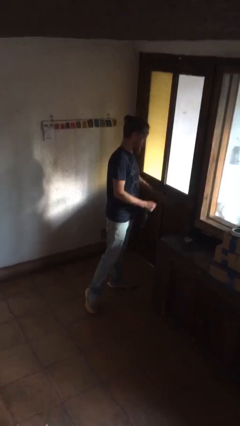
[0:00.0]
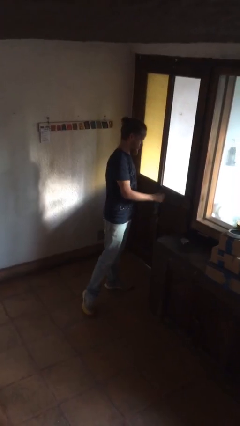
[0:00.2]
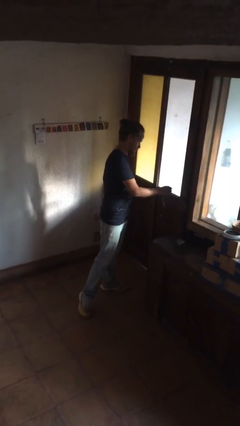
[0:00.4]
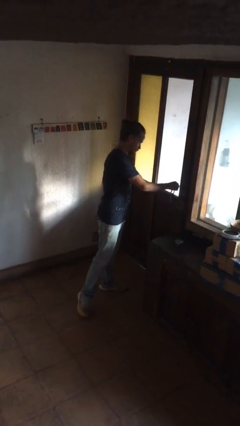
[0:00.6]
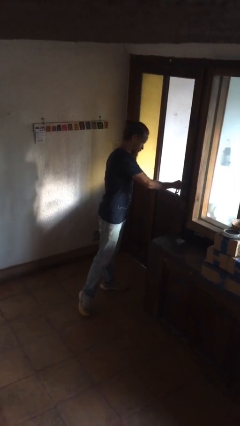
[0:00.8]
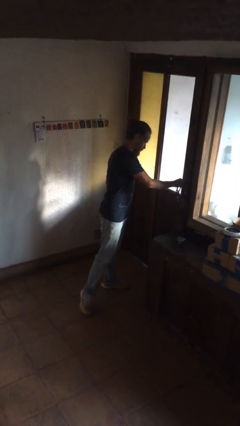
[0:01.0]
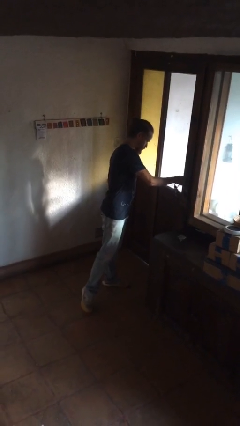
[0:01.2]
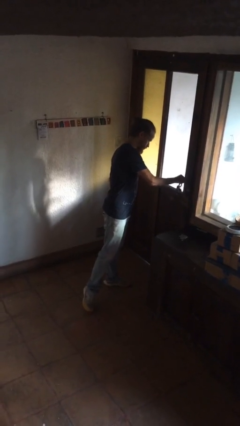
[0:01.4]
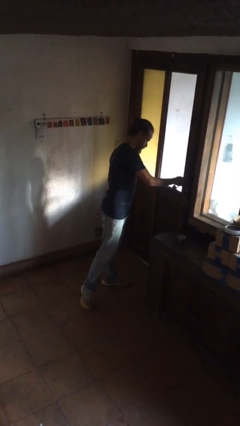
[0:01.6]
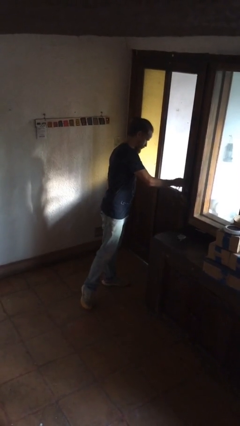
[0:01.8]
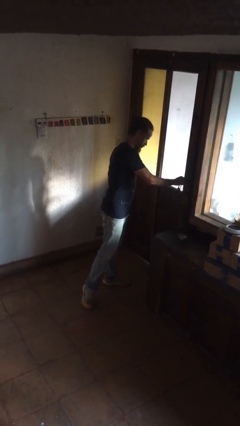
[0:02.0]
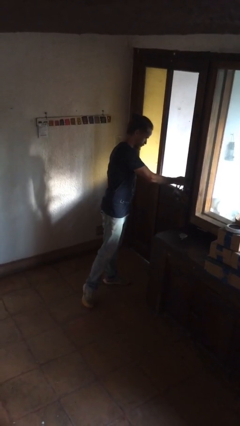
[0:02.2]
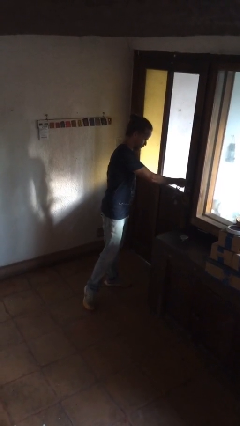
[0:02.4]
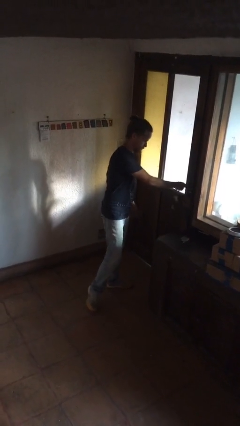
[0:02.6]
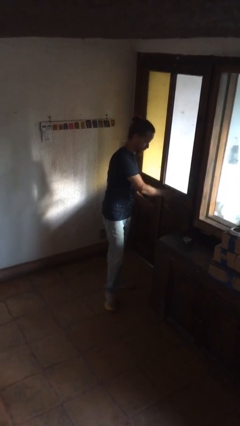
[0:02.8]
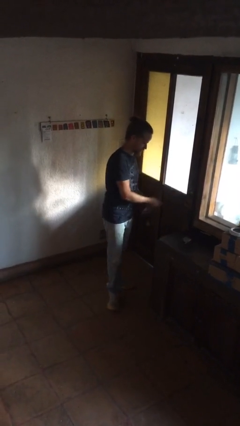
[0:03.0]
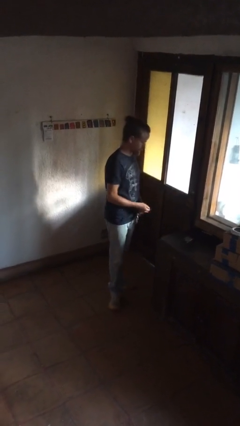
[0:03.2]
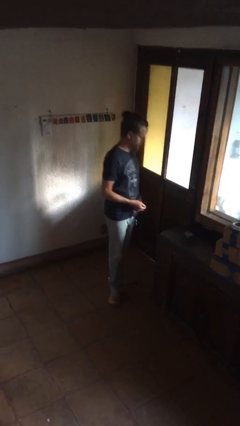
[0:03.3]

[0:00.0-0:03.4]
person locks door with keys

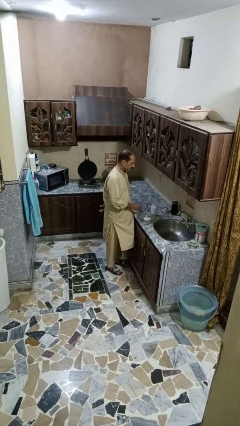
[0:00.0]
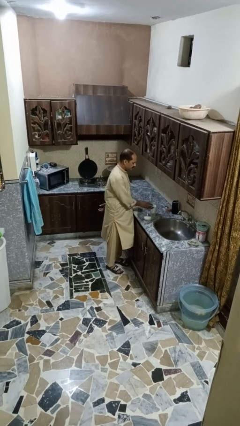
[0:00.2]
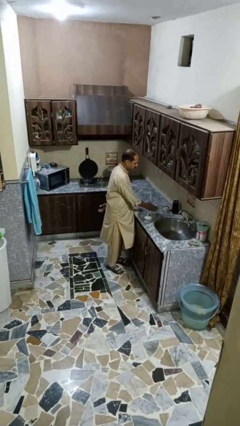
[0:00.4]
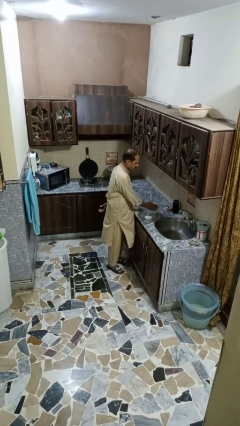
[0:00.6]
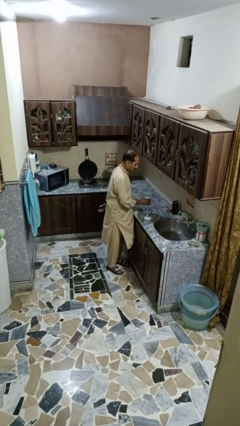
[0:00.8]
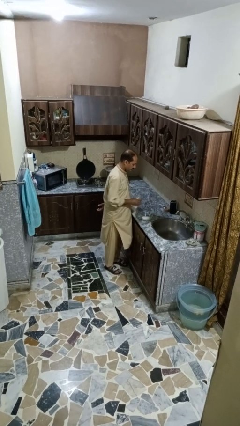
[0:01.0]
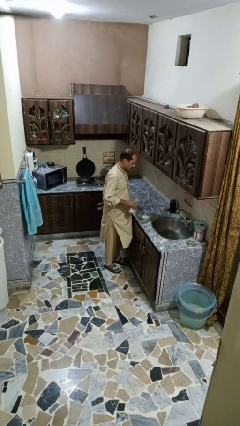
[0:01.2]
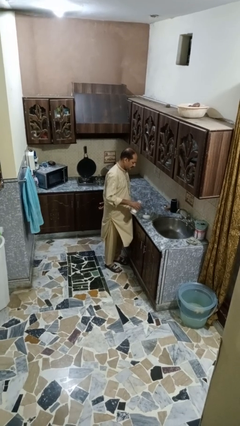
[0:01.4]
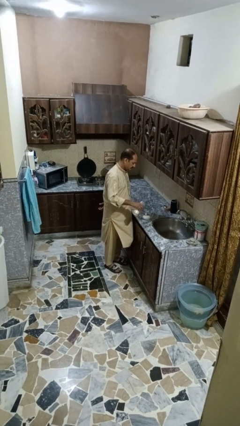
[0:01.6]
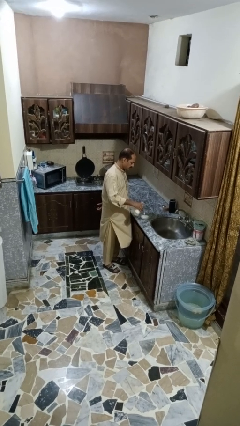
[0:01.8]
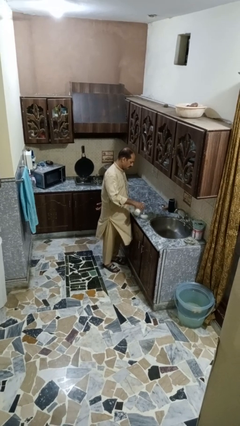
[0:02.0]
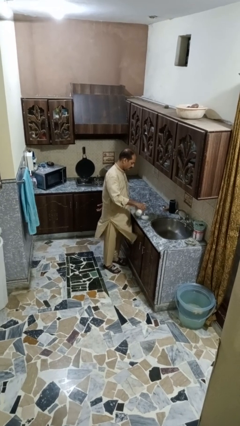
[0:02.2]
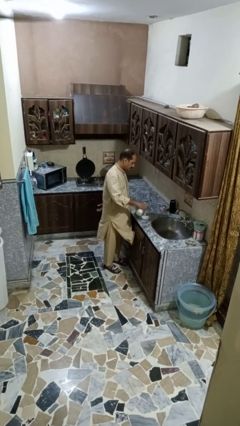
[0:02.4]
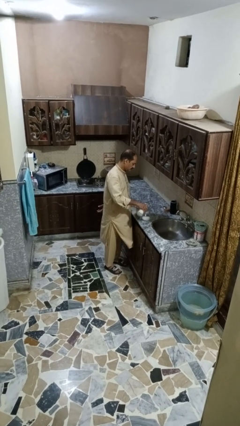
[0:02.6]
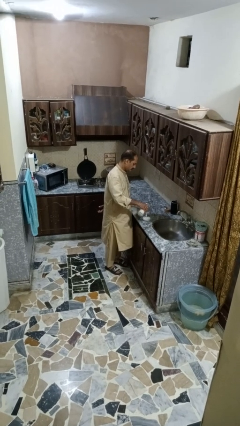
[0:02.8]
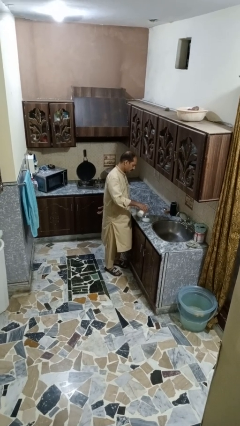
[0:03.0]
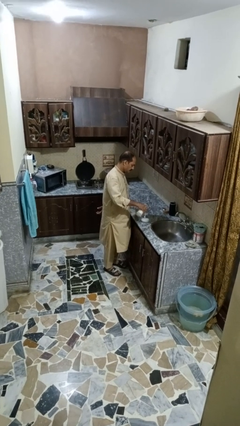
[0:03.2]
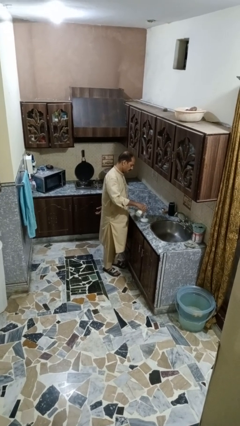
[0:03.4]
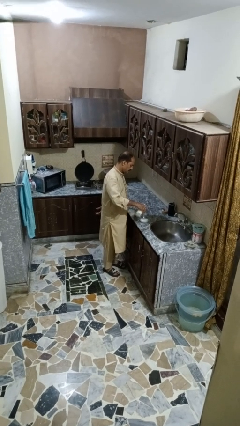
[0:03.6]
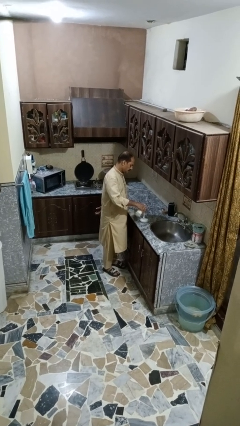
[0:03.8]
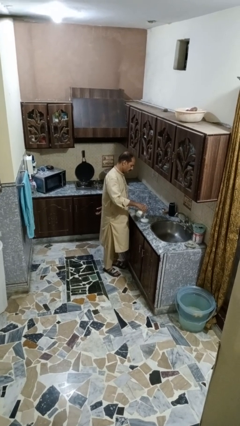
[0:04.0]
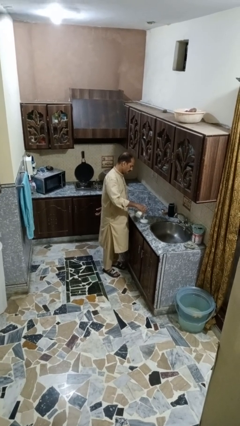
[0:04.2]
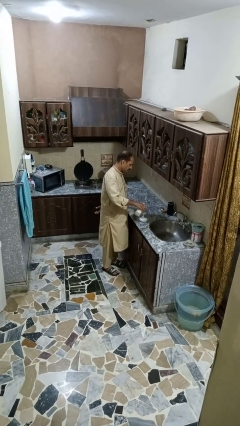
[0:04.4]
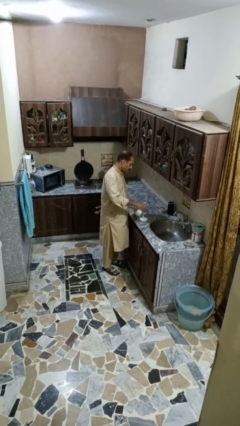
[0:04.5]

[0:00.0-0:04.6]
person pours into bowl

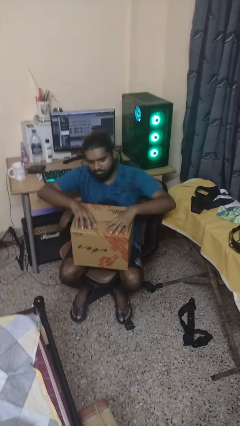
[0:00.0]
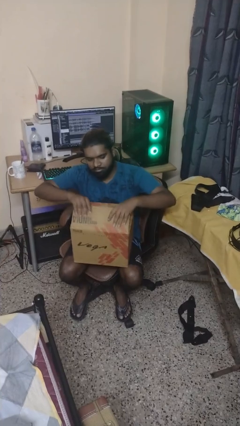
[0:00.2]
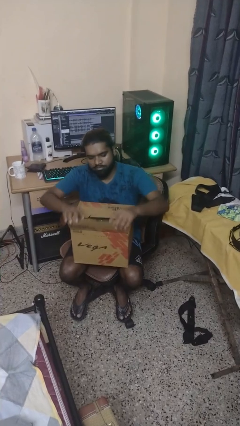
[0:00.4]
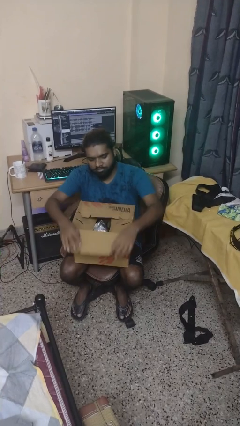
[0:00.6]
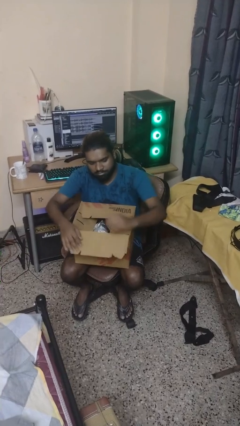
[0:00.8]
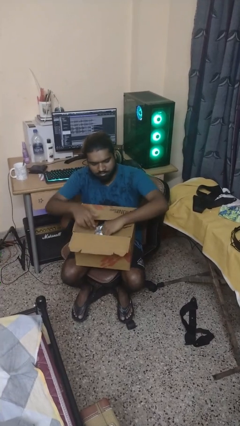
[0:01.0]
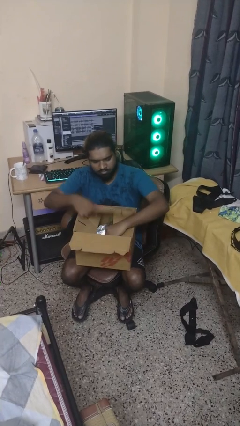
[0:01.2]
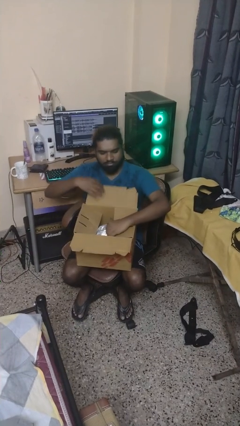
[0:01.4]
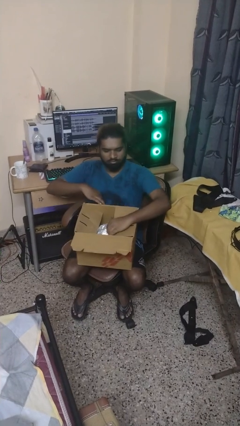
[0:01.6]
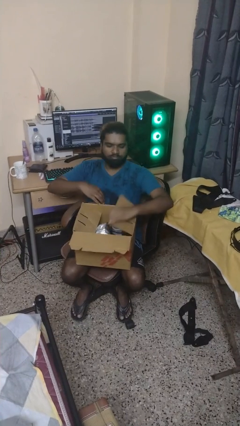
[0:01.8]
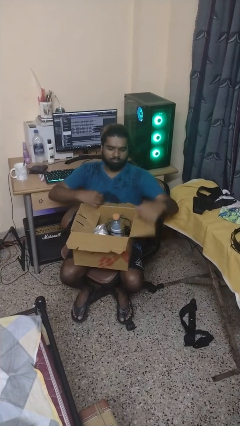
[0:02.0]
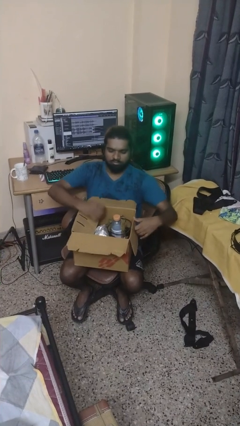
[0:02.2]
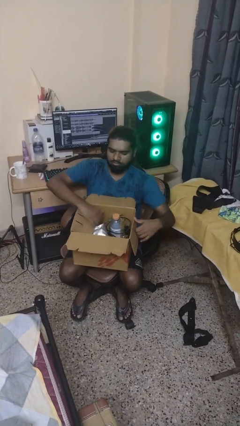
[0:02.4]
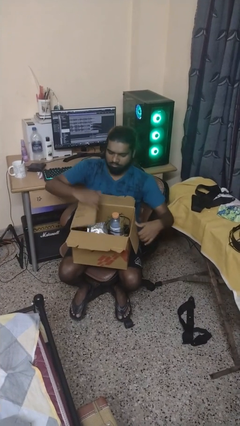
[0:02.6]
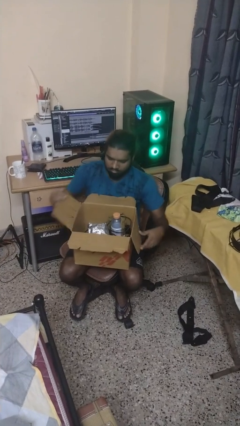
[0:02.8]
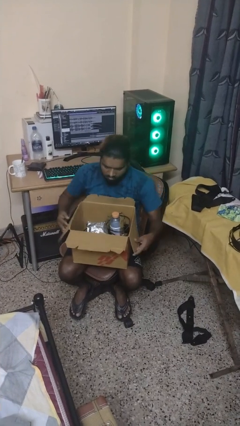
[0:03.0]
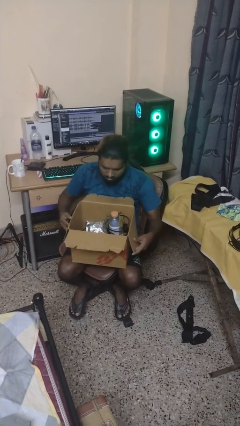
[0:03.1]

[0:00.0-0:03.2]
person opens box

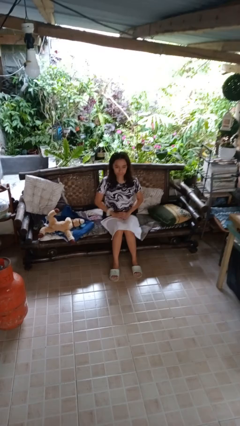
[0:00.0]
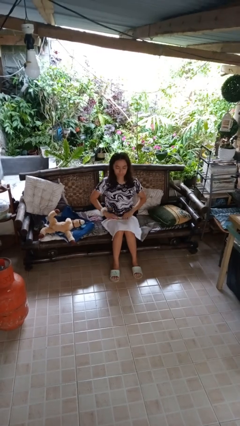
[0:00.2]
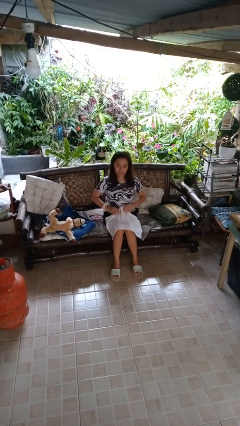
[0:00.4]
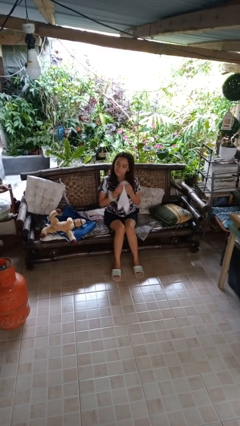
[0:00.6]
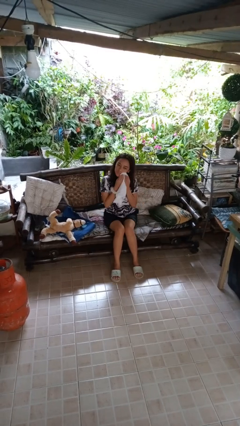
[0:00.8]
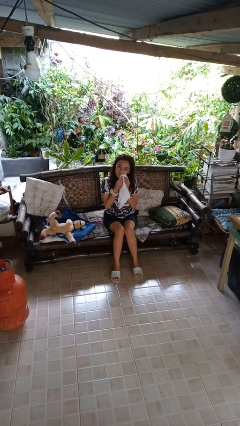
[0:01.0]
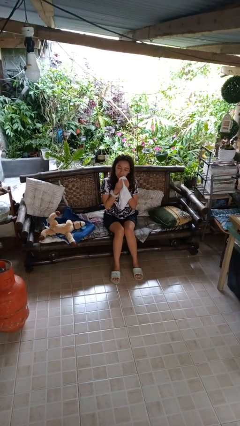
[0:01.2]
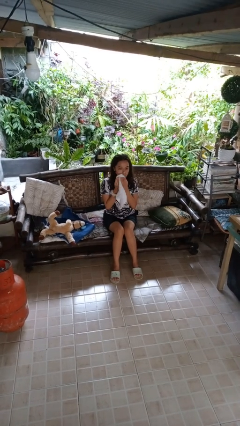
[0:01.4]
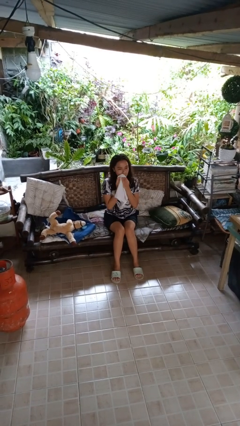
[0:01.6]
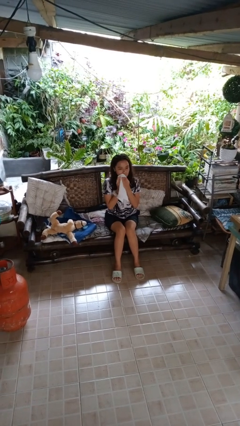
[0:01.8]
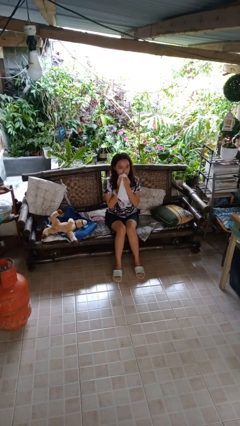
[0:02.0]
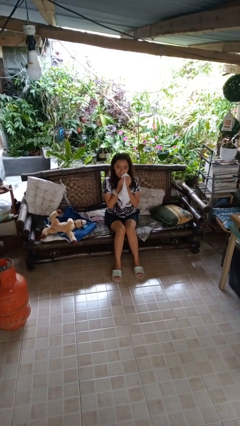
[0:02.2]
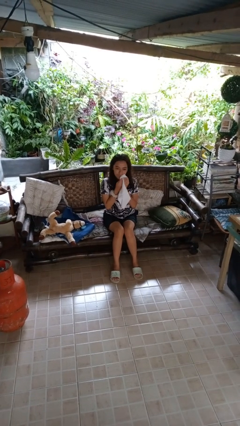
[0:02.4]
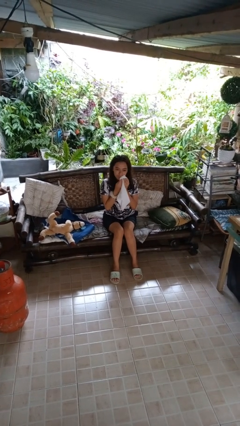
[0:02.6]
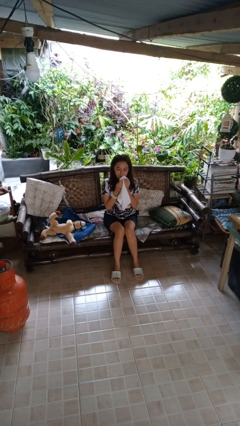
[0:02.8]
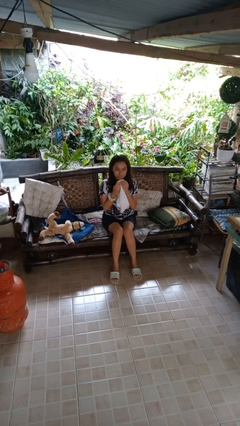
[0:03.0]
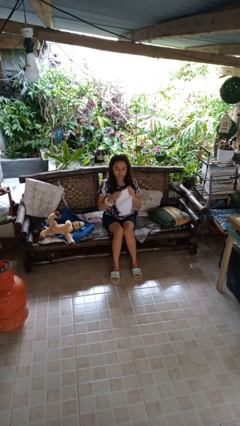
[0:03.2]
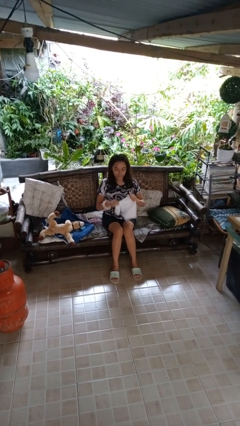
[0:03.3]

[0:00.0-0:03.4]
person wipes mouth with napkin

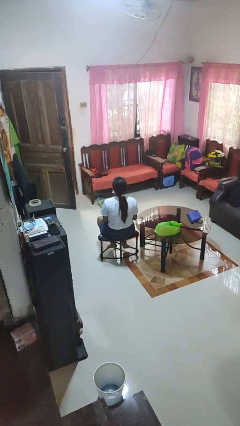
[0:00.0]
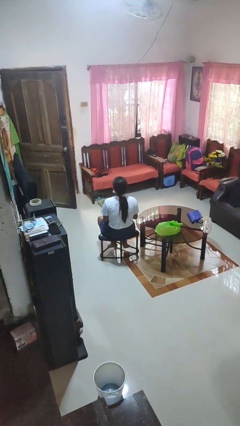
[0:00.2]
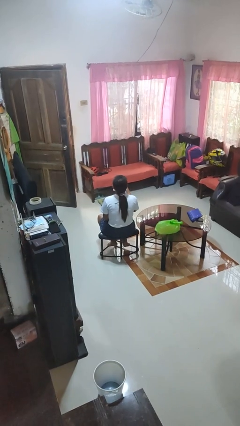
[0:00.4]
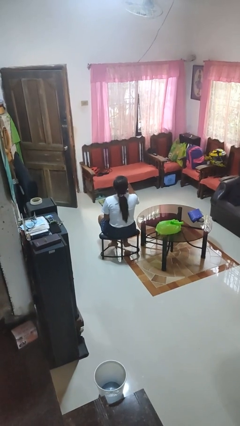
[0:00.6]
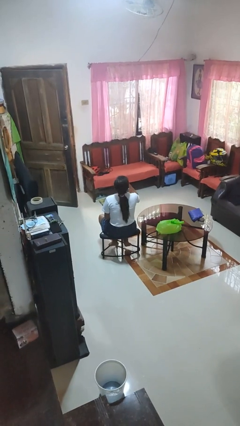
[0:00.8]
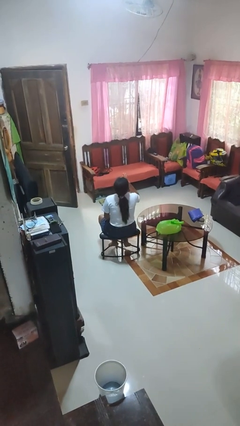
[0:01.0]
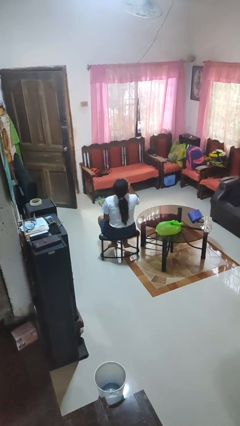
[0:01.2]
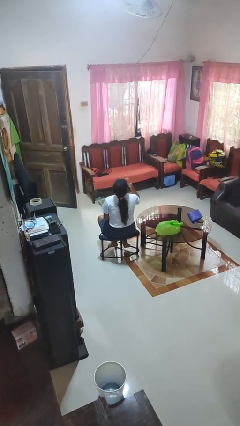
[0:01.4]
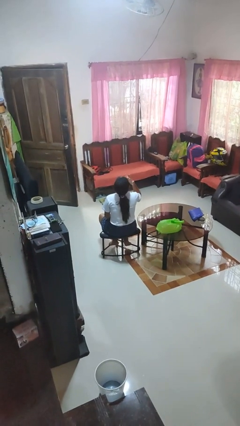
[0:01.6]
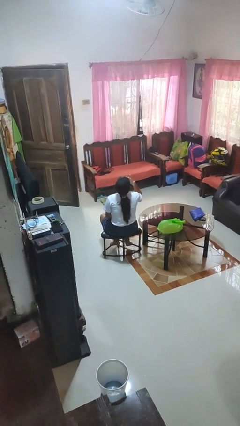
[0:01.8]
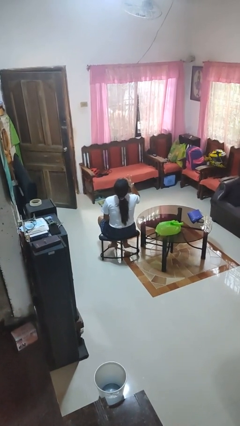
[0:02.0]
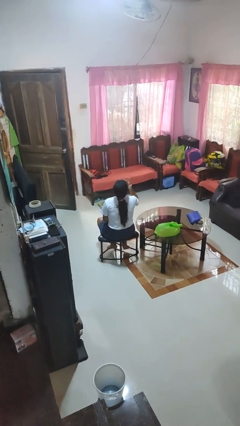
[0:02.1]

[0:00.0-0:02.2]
person licks fingers

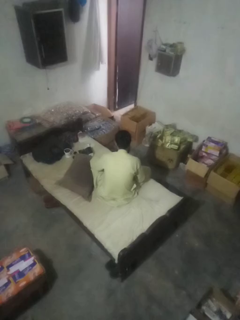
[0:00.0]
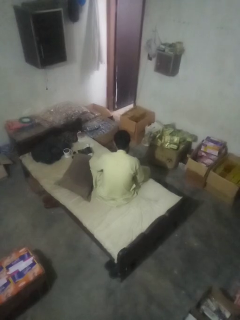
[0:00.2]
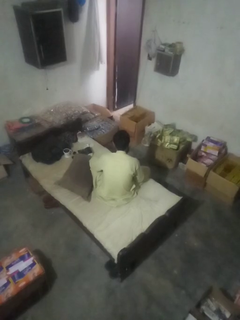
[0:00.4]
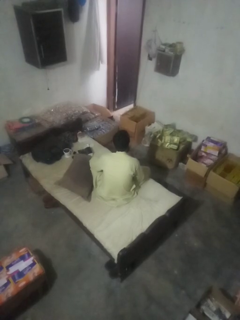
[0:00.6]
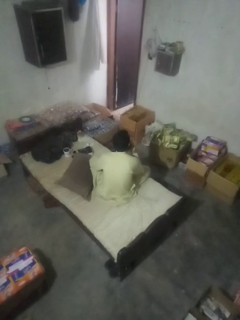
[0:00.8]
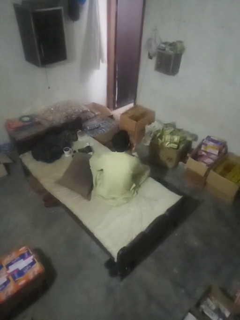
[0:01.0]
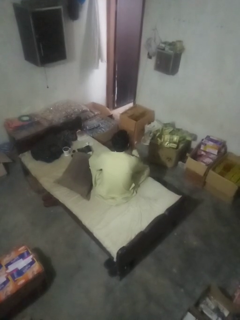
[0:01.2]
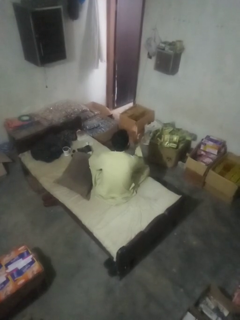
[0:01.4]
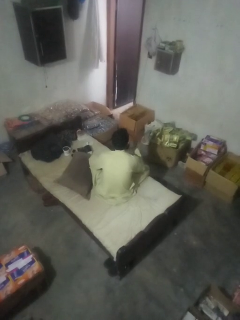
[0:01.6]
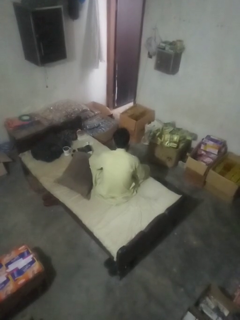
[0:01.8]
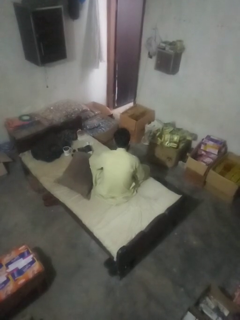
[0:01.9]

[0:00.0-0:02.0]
person gestures blow kiss
